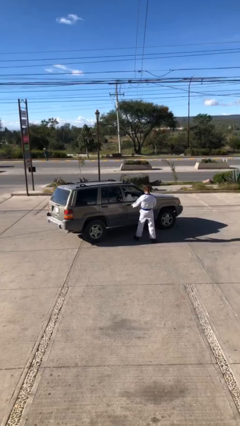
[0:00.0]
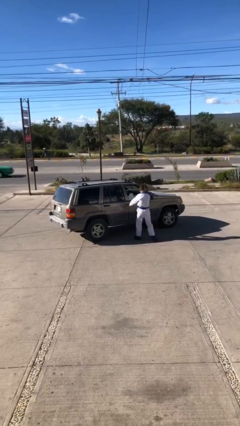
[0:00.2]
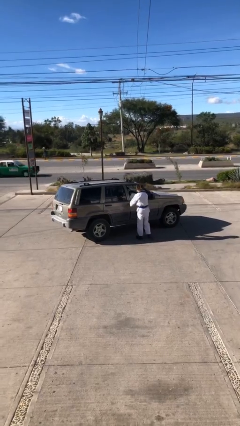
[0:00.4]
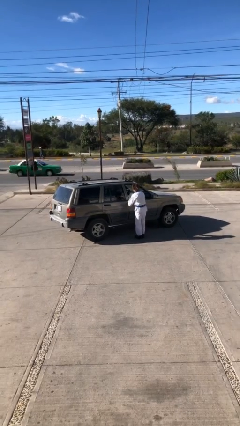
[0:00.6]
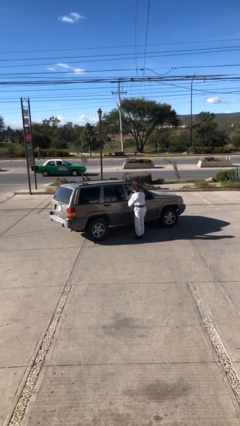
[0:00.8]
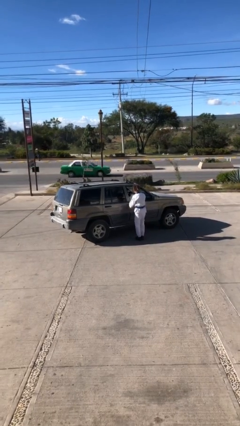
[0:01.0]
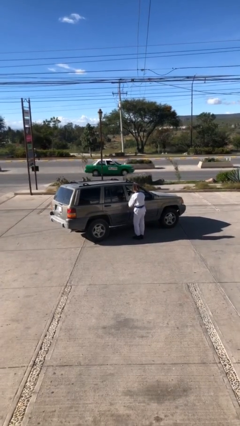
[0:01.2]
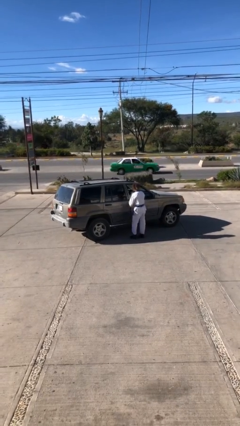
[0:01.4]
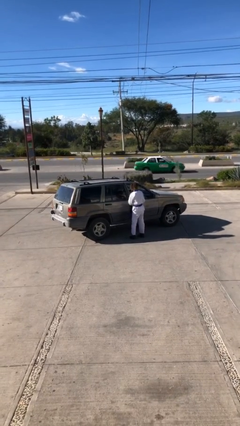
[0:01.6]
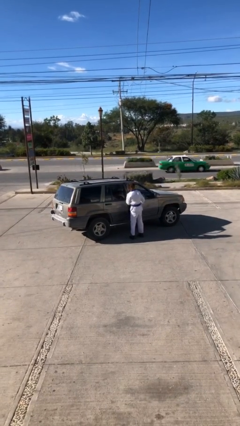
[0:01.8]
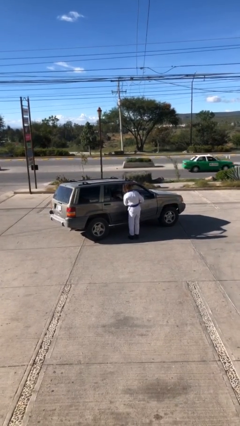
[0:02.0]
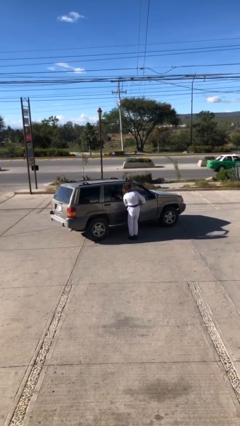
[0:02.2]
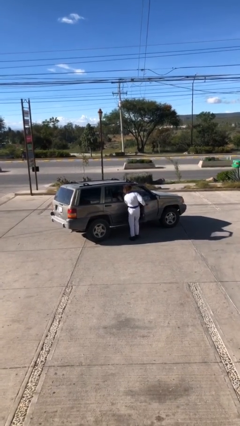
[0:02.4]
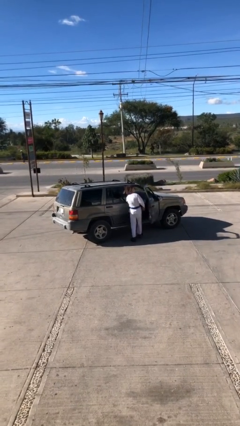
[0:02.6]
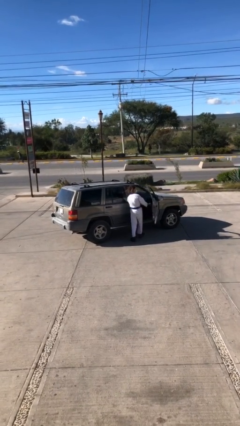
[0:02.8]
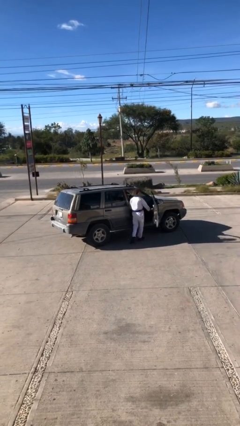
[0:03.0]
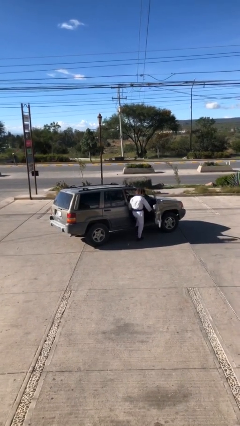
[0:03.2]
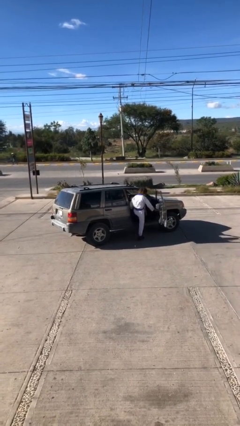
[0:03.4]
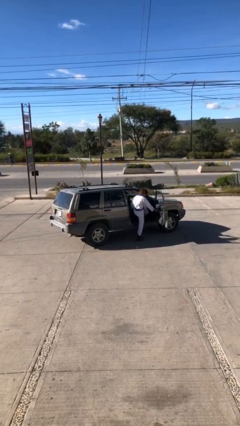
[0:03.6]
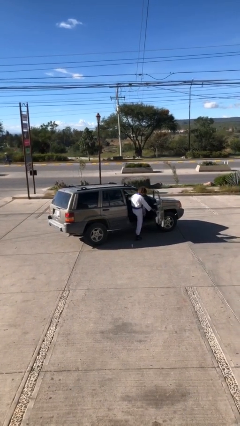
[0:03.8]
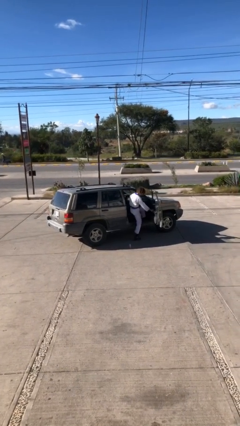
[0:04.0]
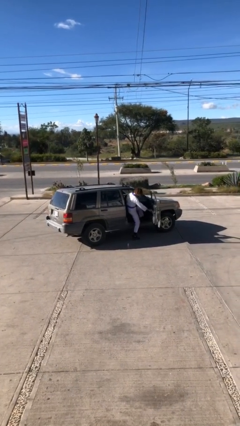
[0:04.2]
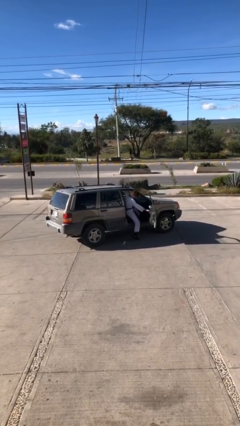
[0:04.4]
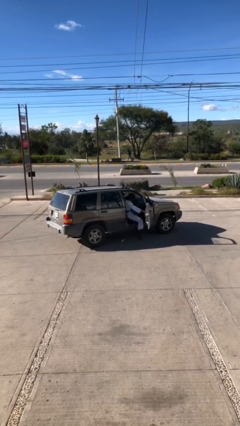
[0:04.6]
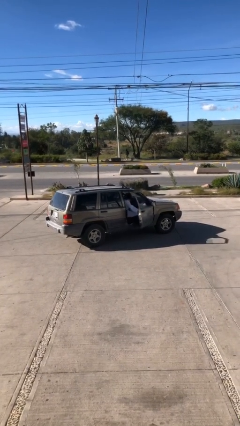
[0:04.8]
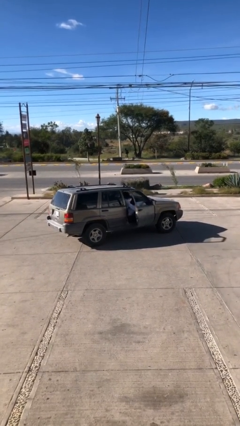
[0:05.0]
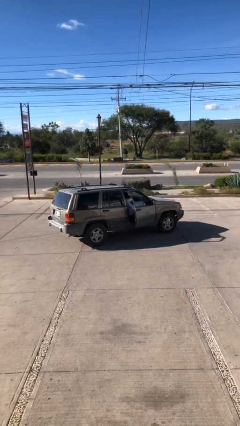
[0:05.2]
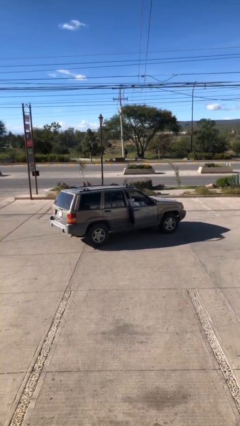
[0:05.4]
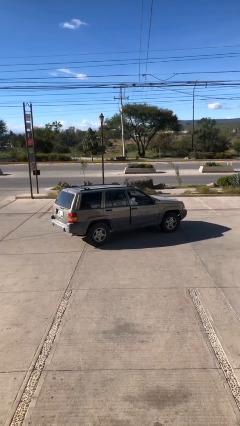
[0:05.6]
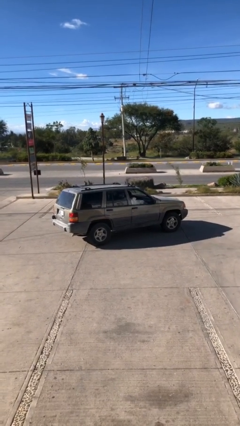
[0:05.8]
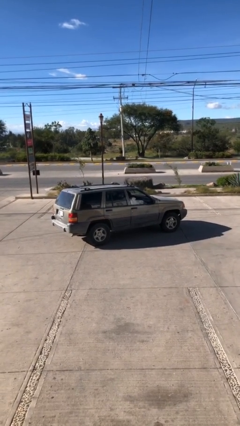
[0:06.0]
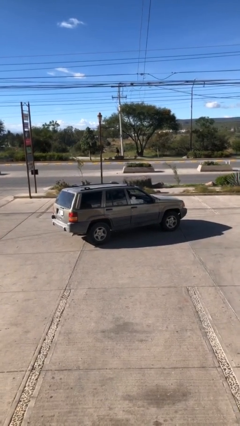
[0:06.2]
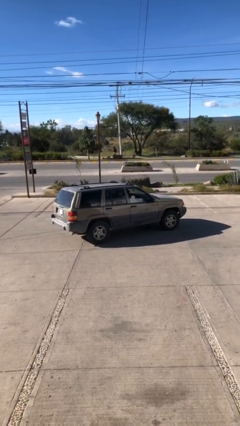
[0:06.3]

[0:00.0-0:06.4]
car picks up person

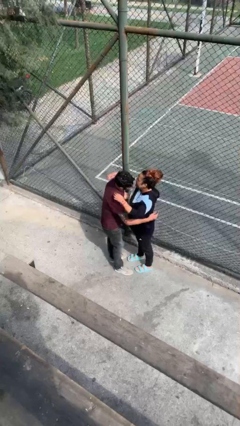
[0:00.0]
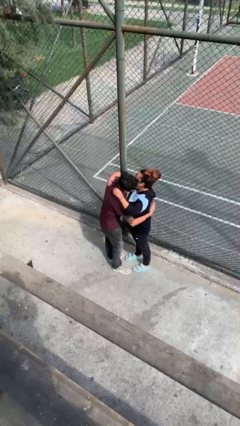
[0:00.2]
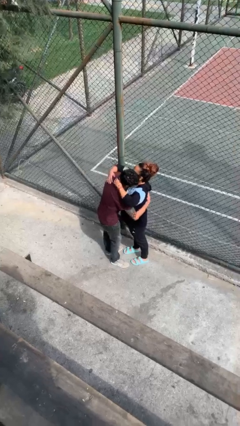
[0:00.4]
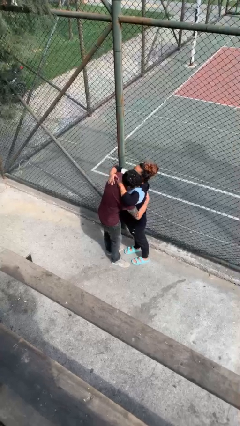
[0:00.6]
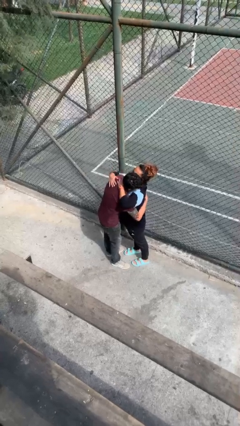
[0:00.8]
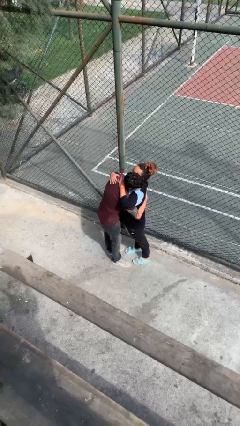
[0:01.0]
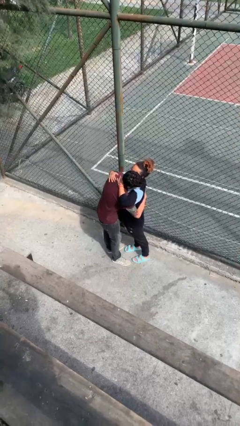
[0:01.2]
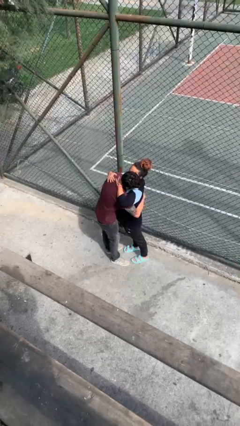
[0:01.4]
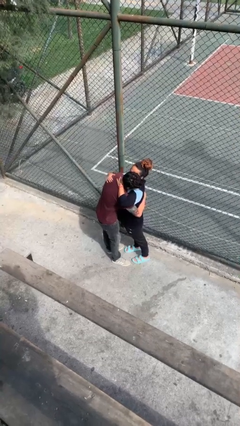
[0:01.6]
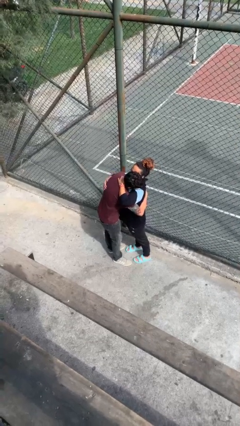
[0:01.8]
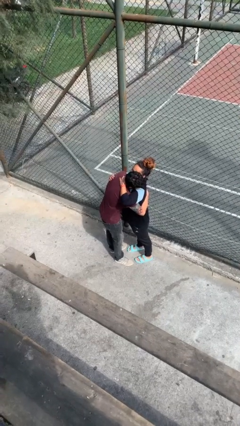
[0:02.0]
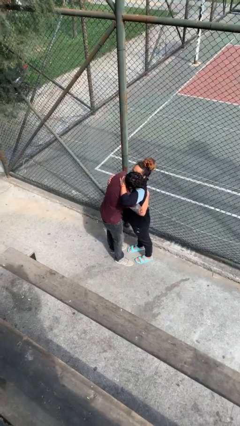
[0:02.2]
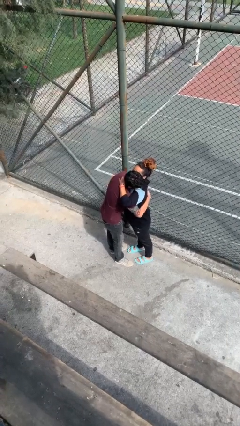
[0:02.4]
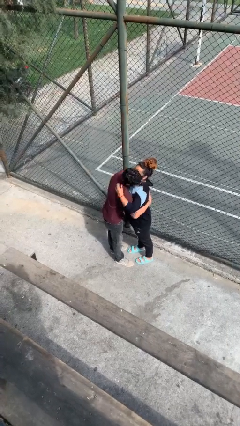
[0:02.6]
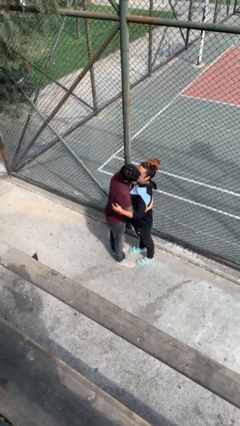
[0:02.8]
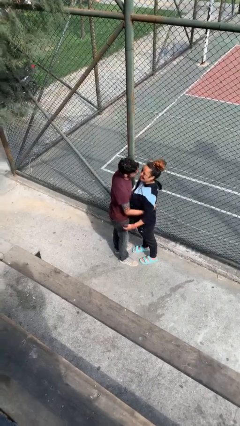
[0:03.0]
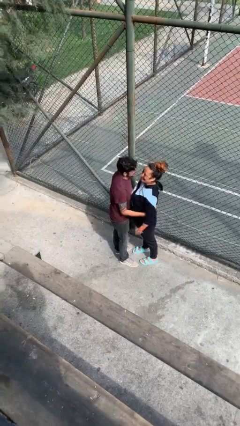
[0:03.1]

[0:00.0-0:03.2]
person embraces person

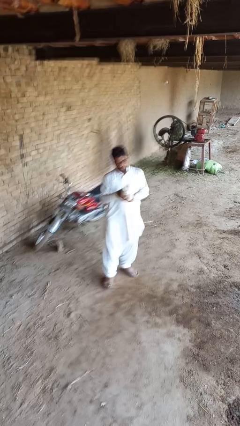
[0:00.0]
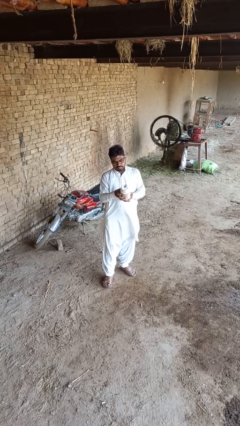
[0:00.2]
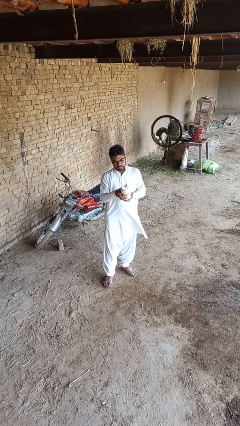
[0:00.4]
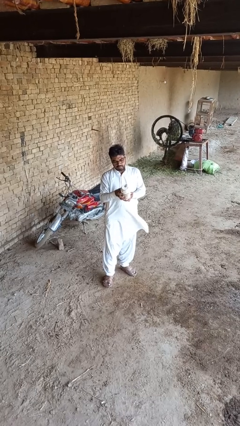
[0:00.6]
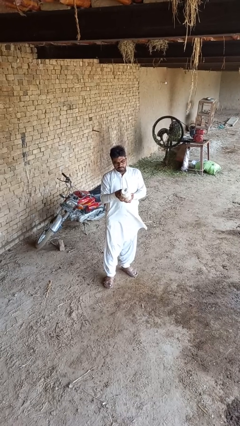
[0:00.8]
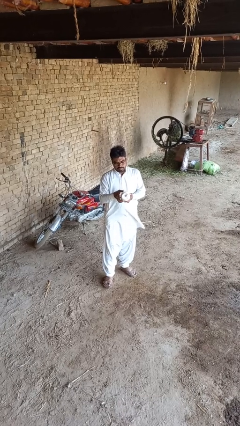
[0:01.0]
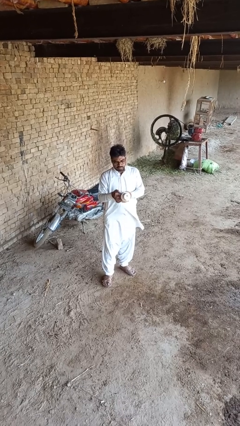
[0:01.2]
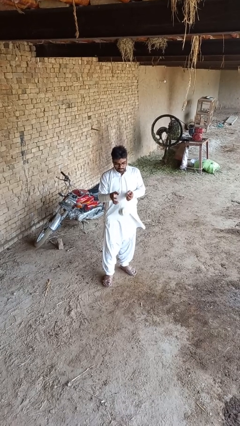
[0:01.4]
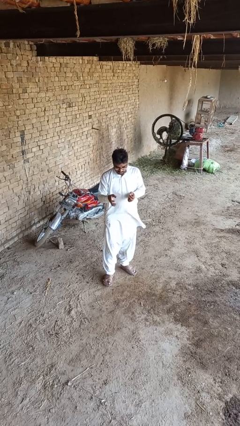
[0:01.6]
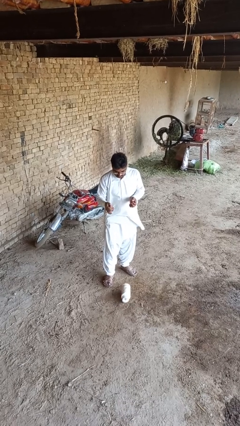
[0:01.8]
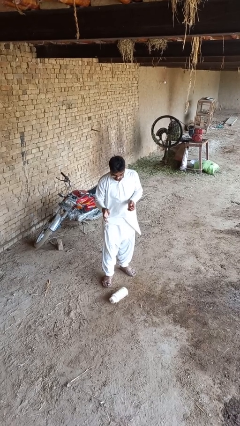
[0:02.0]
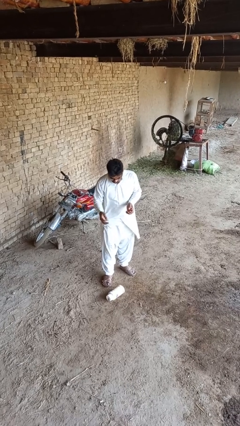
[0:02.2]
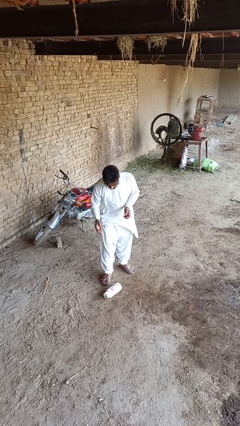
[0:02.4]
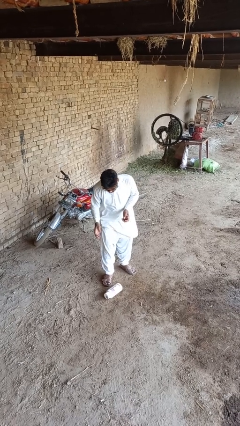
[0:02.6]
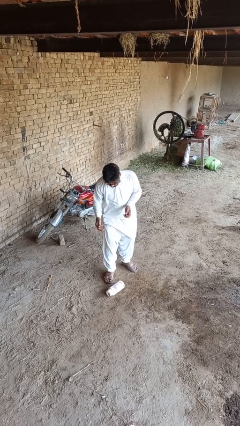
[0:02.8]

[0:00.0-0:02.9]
person drops object

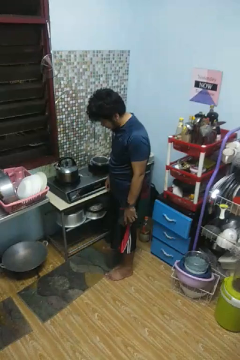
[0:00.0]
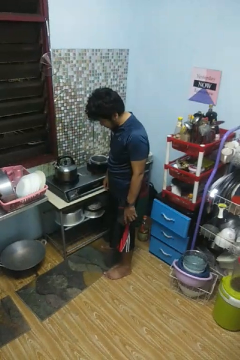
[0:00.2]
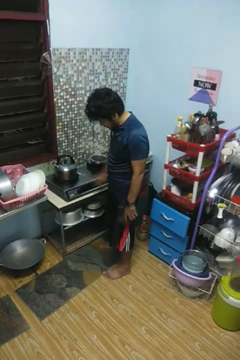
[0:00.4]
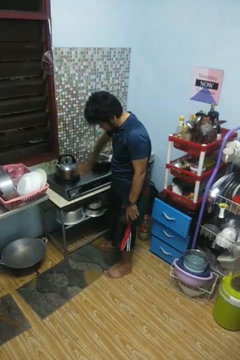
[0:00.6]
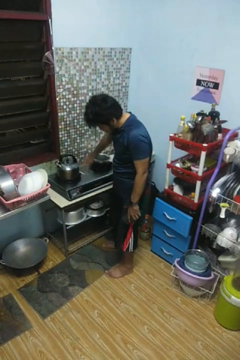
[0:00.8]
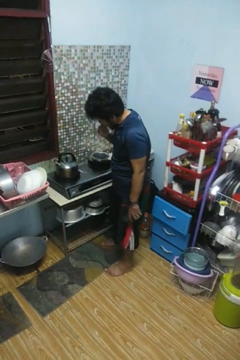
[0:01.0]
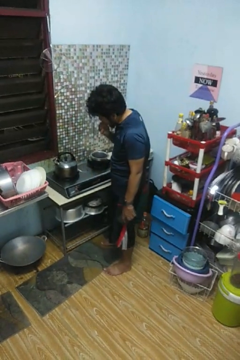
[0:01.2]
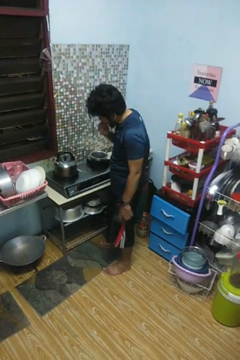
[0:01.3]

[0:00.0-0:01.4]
person burns hand

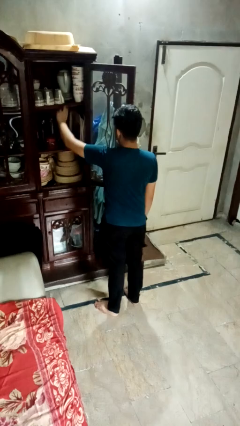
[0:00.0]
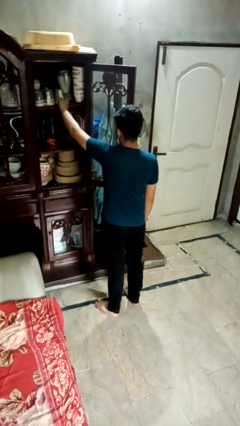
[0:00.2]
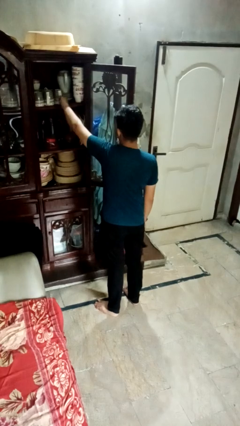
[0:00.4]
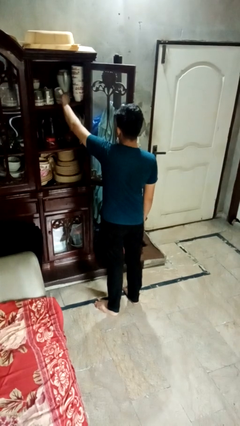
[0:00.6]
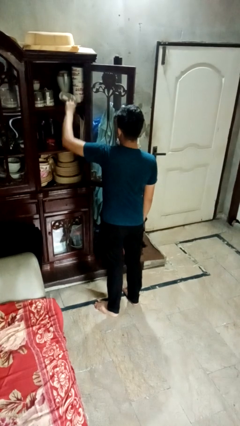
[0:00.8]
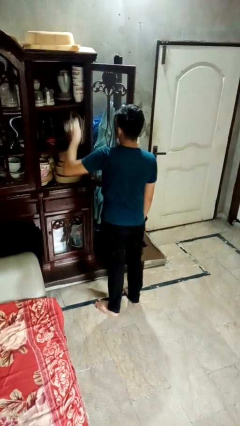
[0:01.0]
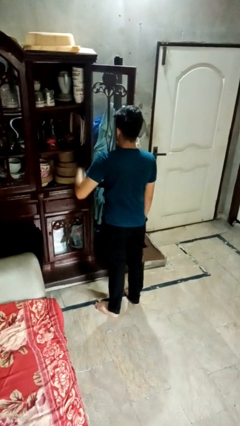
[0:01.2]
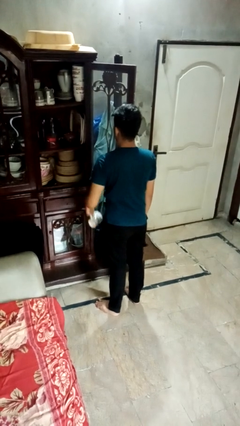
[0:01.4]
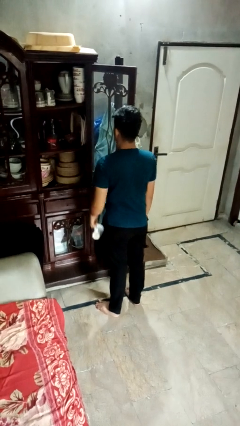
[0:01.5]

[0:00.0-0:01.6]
person takes object from cabinet

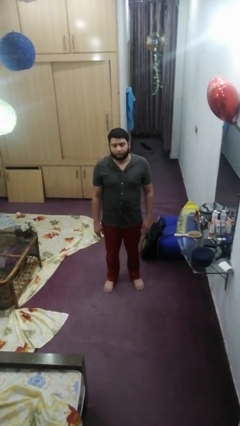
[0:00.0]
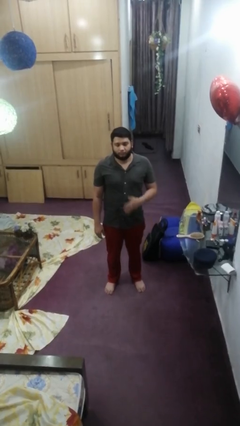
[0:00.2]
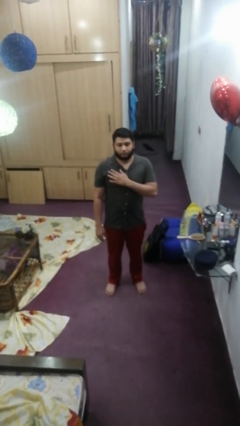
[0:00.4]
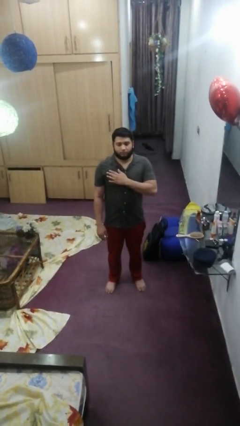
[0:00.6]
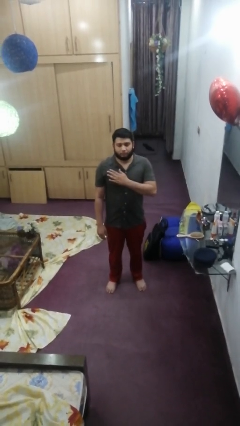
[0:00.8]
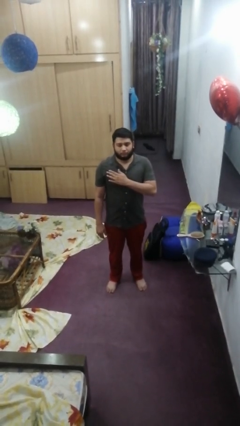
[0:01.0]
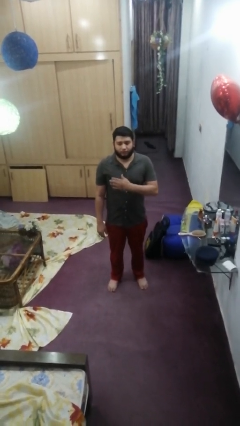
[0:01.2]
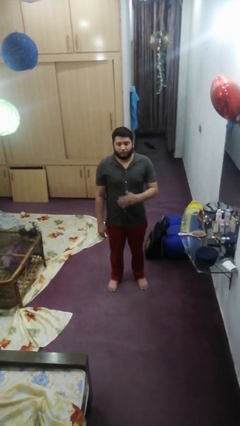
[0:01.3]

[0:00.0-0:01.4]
person drums on chest

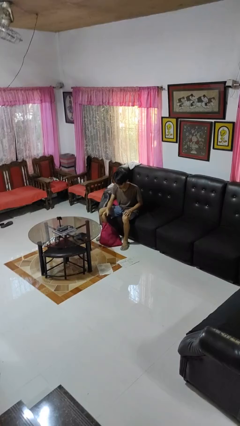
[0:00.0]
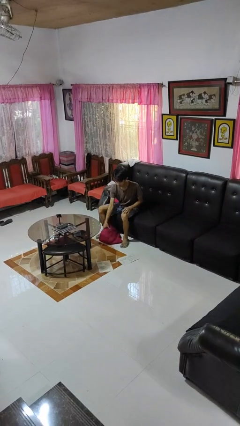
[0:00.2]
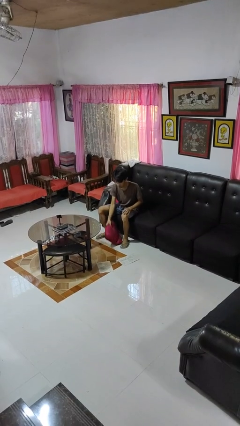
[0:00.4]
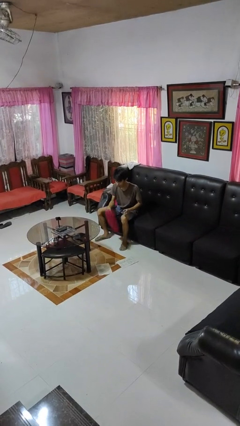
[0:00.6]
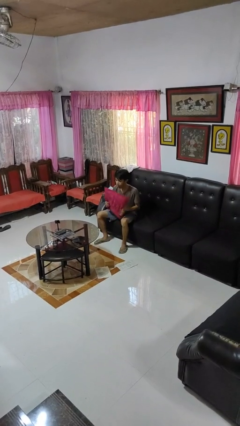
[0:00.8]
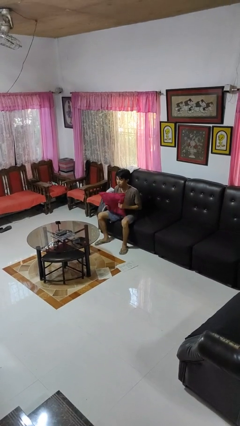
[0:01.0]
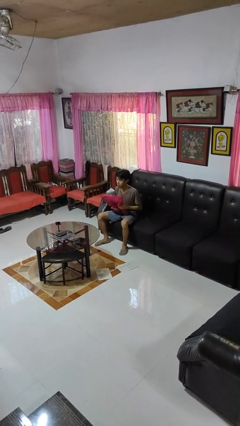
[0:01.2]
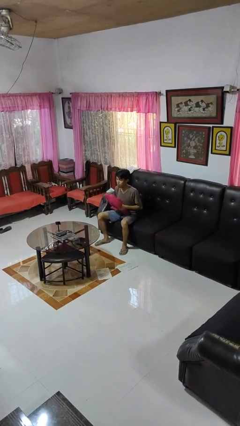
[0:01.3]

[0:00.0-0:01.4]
person picks up object from floor
